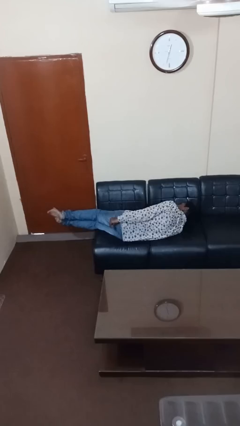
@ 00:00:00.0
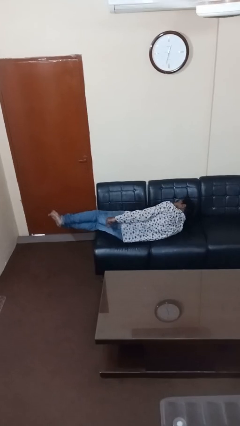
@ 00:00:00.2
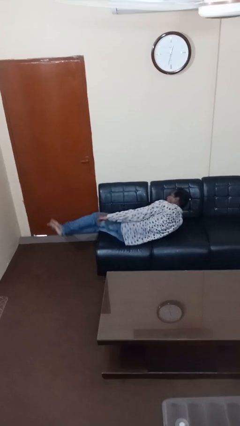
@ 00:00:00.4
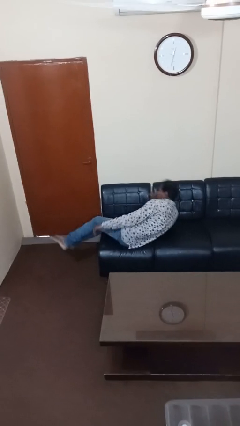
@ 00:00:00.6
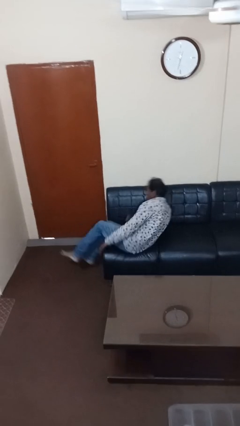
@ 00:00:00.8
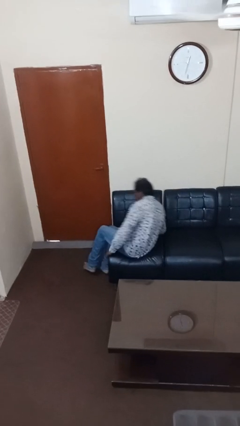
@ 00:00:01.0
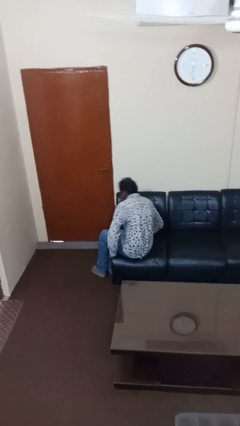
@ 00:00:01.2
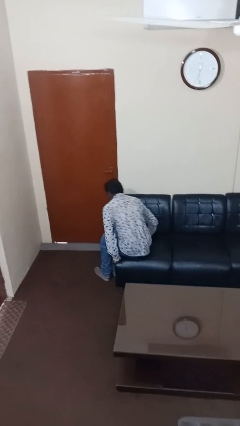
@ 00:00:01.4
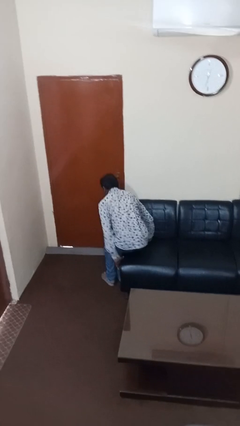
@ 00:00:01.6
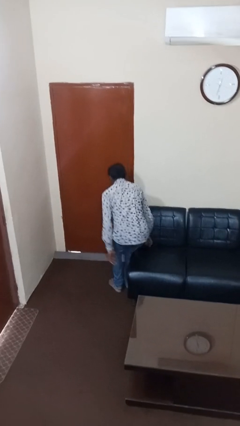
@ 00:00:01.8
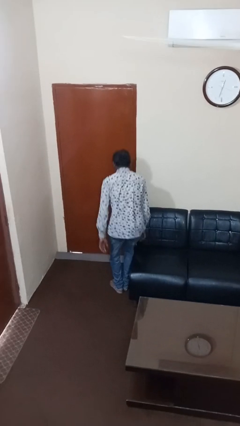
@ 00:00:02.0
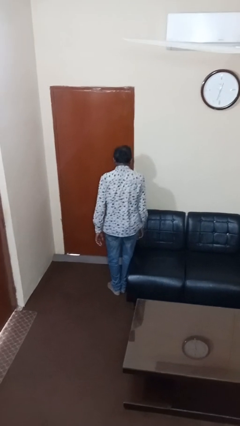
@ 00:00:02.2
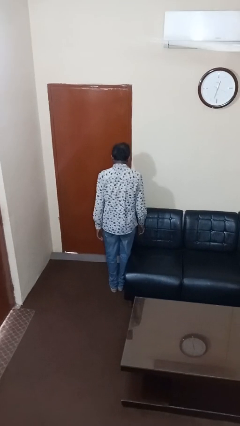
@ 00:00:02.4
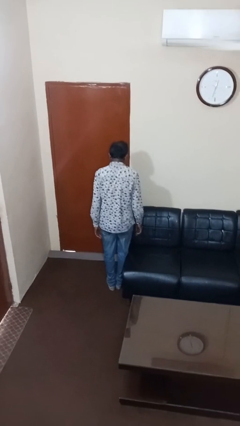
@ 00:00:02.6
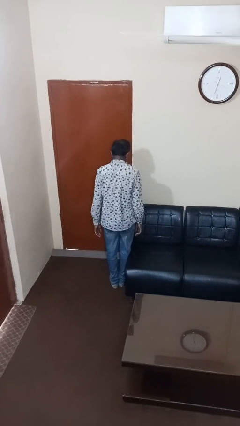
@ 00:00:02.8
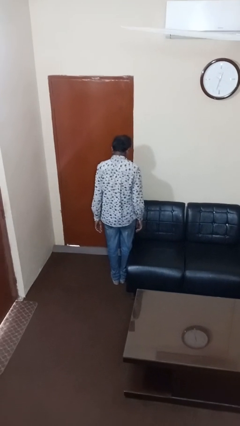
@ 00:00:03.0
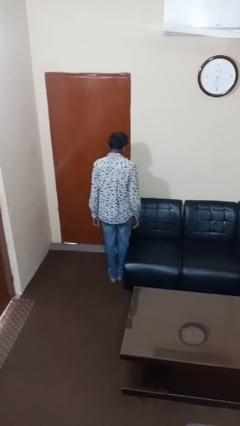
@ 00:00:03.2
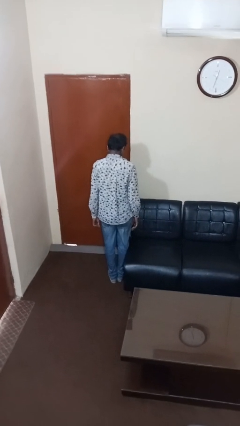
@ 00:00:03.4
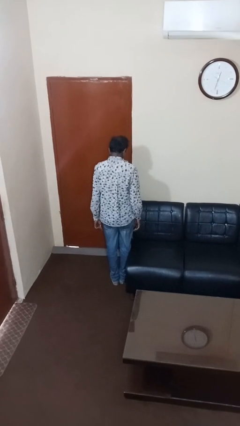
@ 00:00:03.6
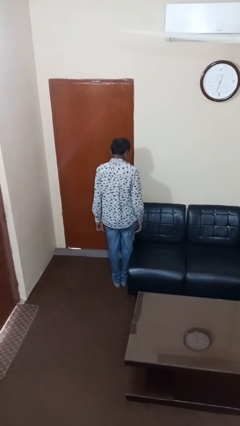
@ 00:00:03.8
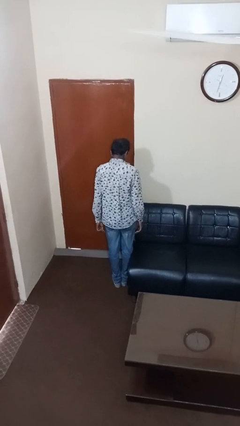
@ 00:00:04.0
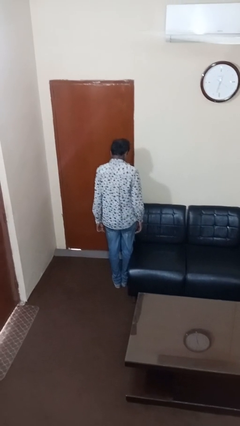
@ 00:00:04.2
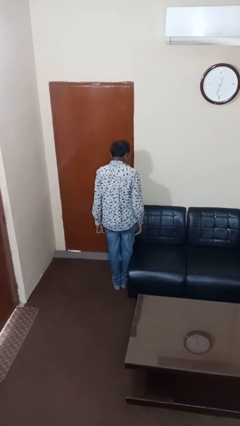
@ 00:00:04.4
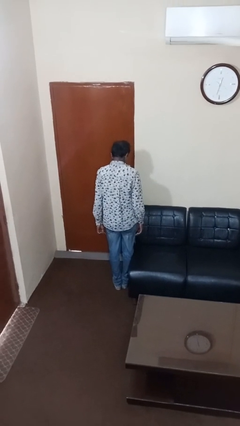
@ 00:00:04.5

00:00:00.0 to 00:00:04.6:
person stands up

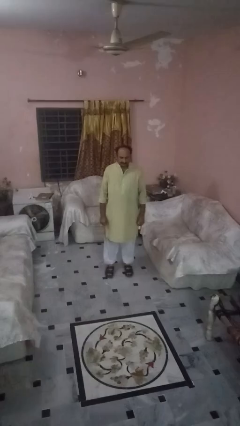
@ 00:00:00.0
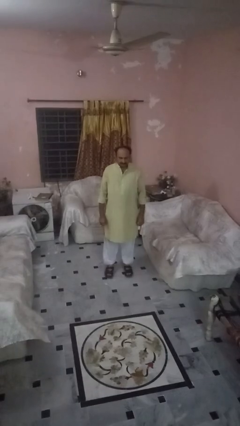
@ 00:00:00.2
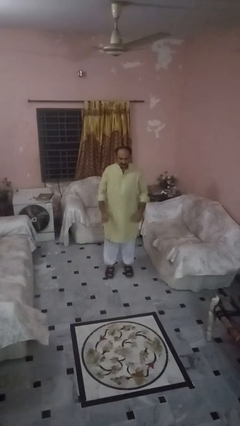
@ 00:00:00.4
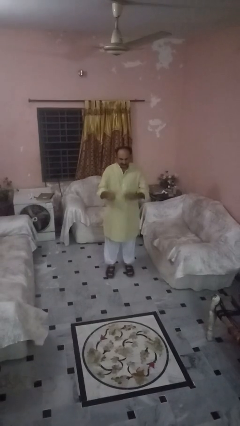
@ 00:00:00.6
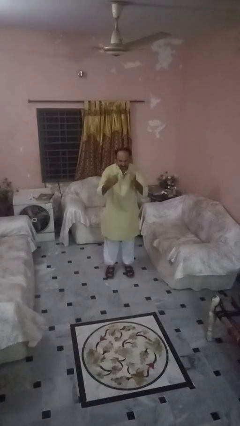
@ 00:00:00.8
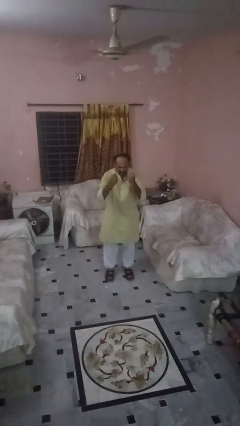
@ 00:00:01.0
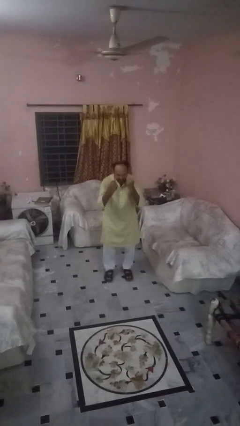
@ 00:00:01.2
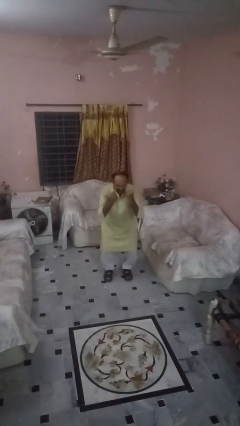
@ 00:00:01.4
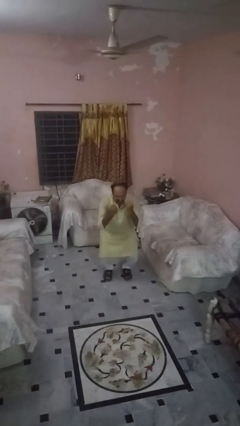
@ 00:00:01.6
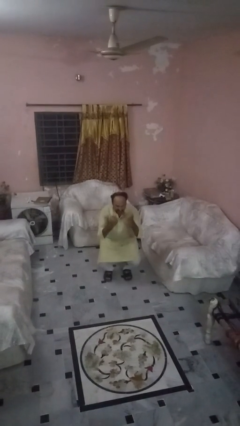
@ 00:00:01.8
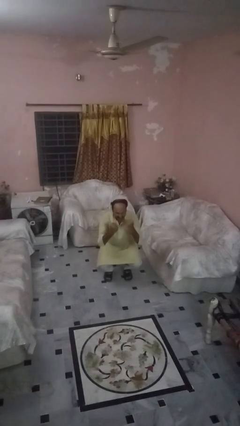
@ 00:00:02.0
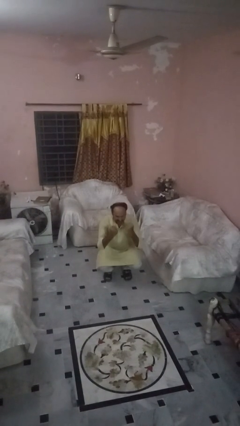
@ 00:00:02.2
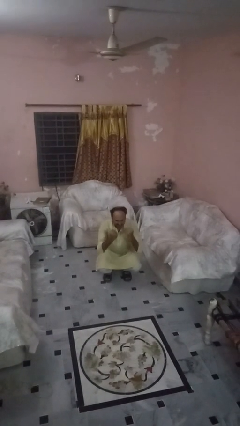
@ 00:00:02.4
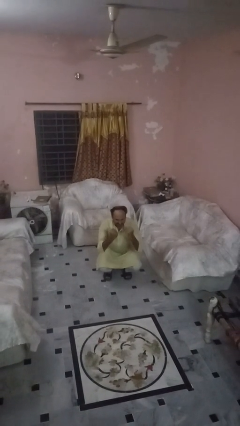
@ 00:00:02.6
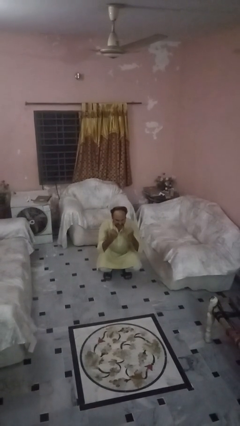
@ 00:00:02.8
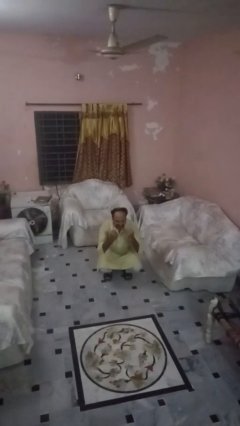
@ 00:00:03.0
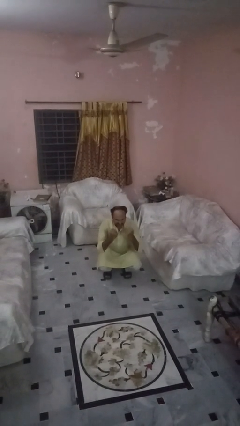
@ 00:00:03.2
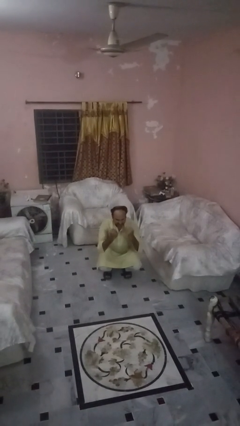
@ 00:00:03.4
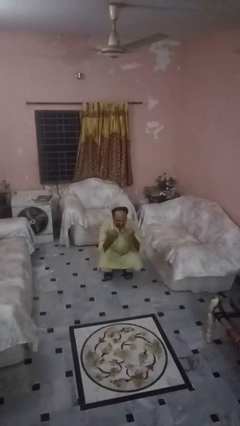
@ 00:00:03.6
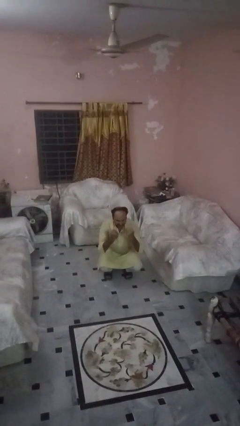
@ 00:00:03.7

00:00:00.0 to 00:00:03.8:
person squats

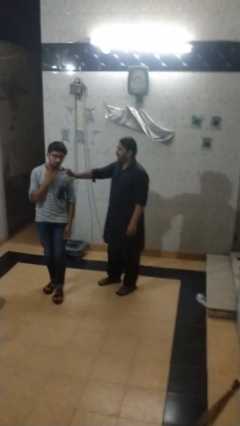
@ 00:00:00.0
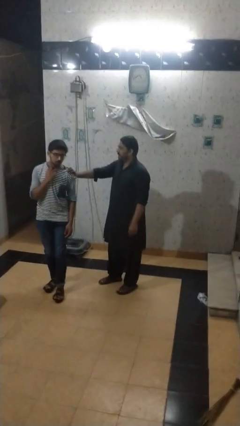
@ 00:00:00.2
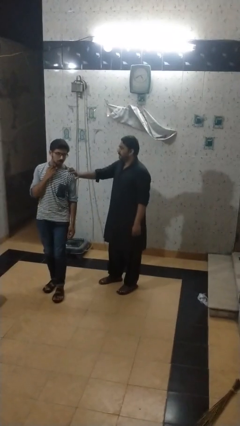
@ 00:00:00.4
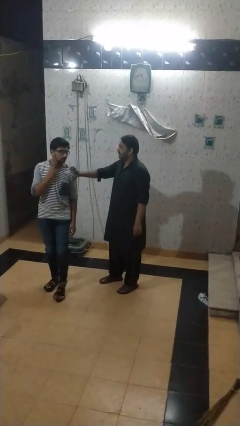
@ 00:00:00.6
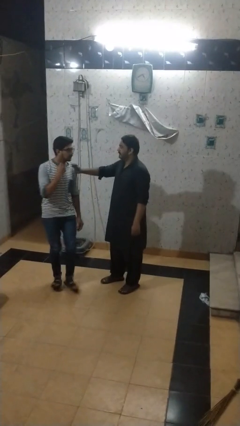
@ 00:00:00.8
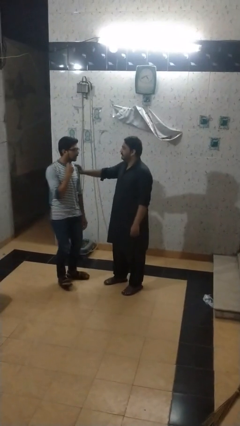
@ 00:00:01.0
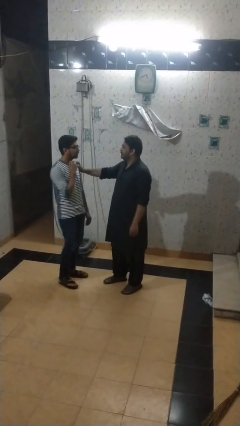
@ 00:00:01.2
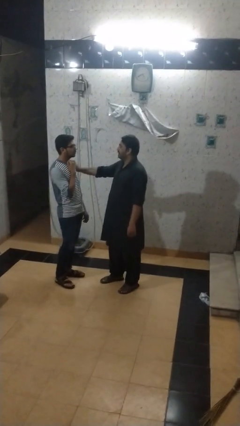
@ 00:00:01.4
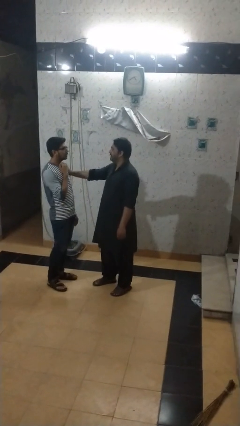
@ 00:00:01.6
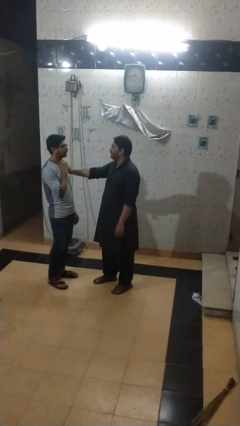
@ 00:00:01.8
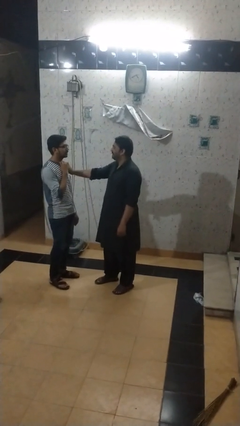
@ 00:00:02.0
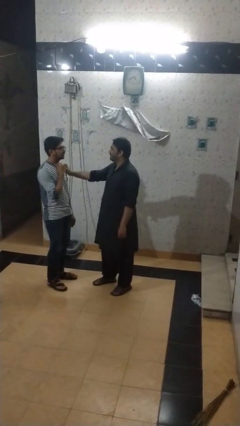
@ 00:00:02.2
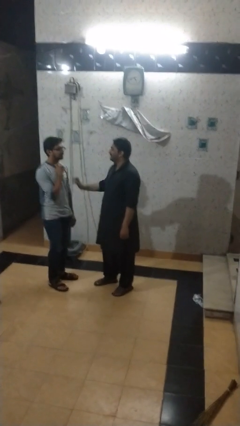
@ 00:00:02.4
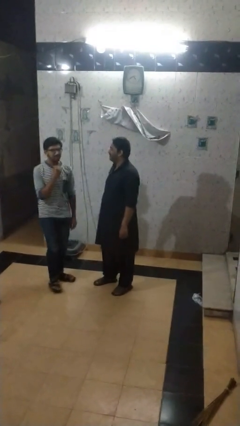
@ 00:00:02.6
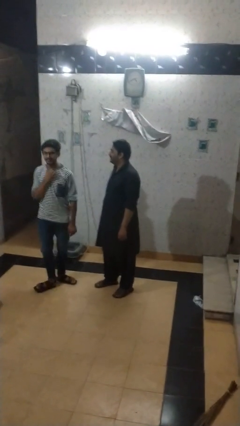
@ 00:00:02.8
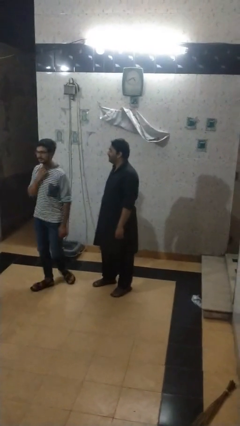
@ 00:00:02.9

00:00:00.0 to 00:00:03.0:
person spins person around

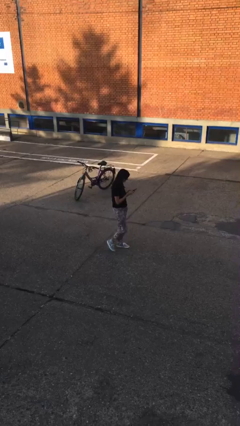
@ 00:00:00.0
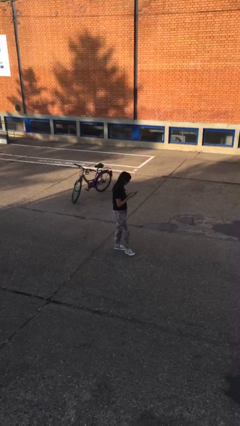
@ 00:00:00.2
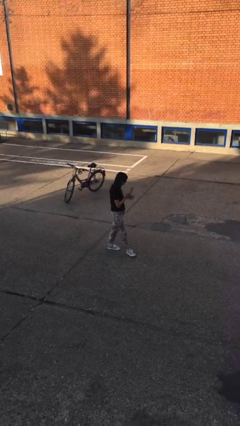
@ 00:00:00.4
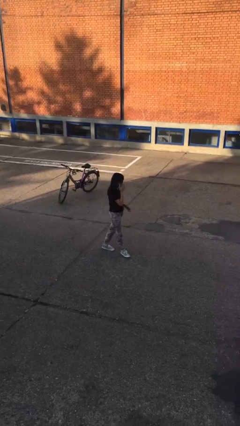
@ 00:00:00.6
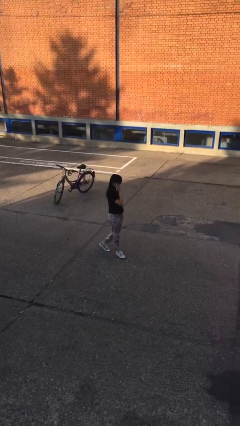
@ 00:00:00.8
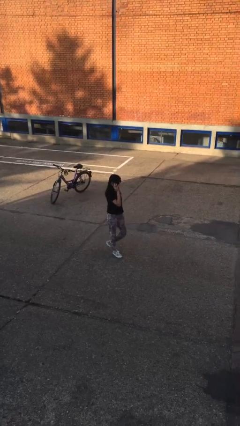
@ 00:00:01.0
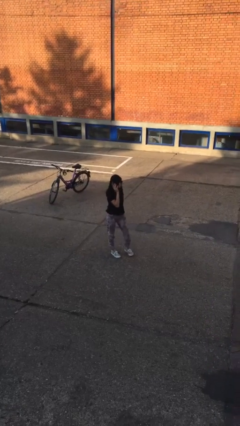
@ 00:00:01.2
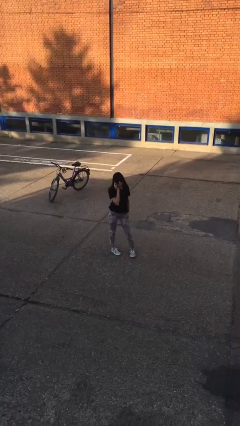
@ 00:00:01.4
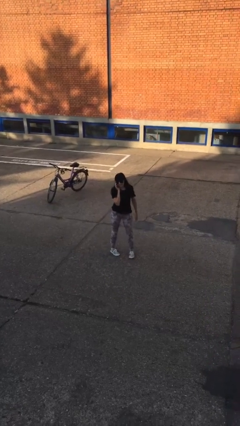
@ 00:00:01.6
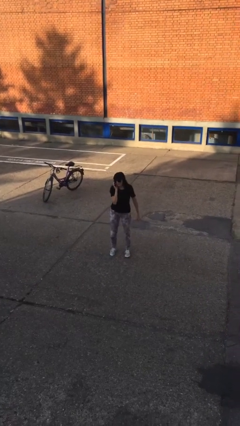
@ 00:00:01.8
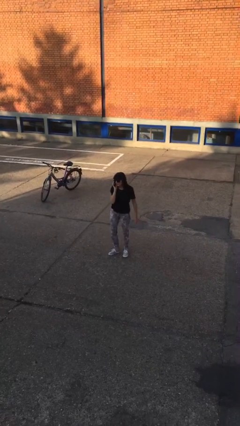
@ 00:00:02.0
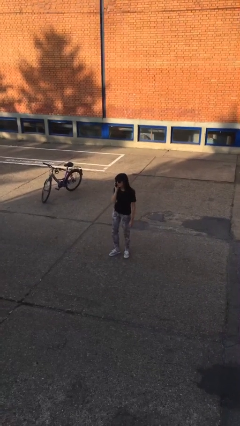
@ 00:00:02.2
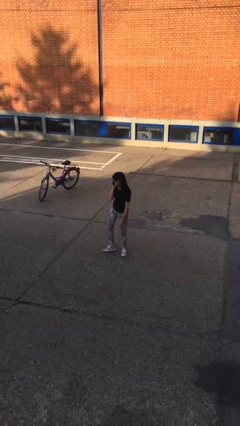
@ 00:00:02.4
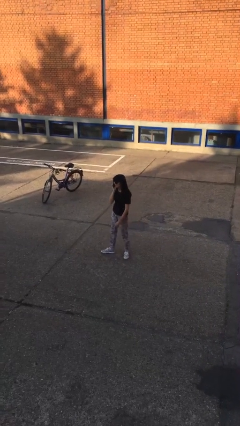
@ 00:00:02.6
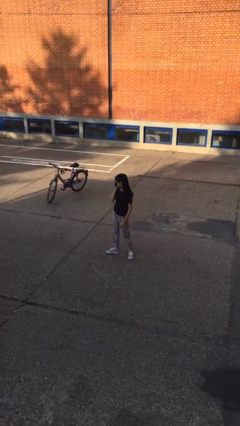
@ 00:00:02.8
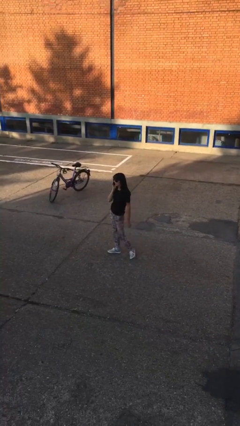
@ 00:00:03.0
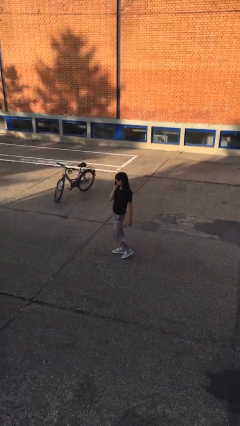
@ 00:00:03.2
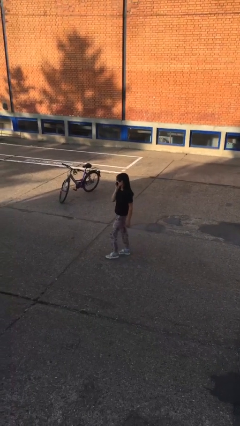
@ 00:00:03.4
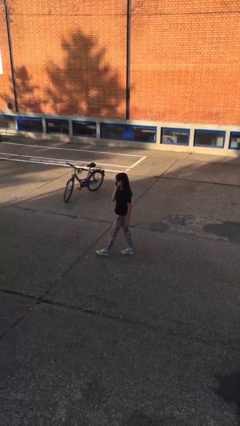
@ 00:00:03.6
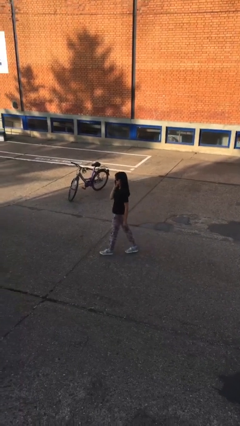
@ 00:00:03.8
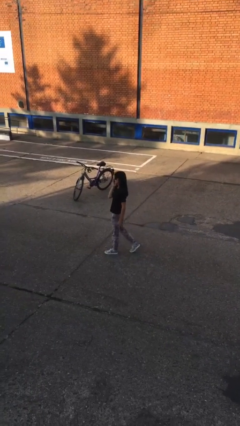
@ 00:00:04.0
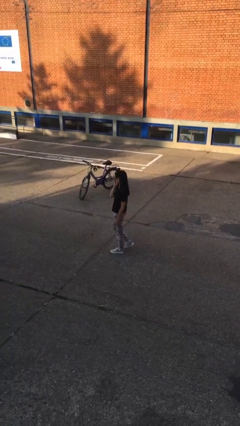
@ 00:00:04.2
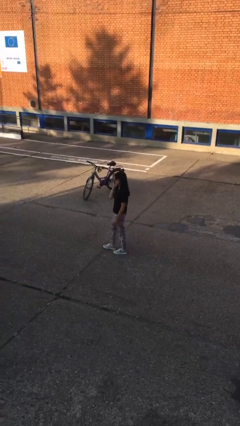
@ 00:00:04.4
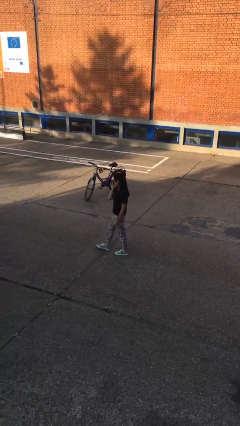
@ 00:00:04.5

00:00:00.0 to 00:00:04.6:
person talks on phone

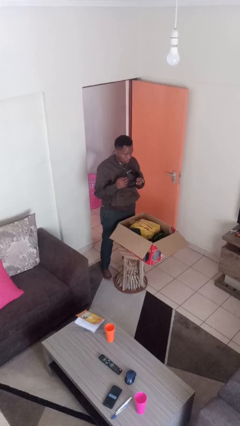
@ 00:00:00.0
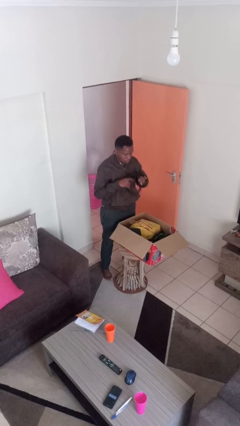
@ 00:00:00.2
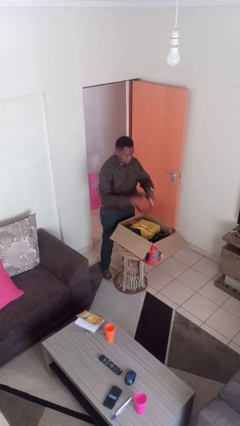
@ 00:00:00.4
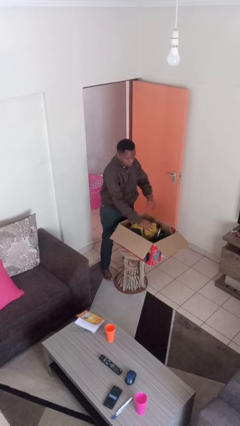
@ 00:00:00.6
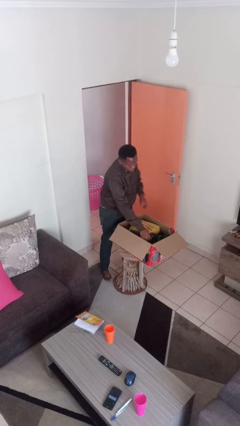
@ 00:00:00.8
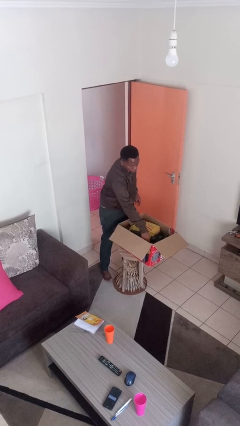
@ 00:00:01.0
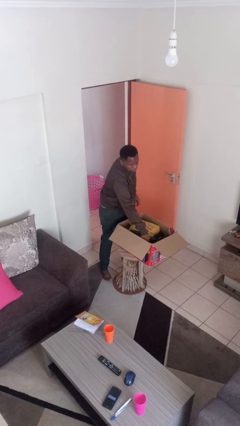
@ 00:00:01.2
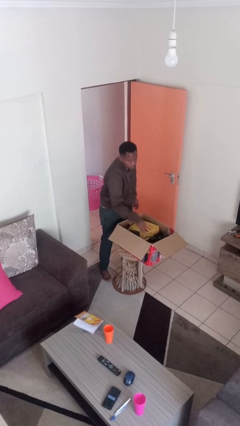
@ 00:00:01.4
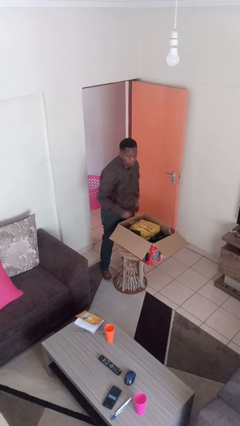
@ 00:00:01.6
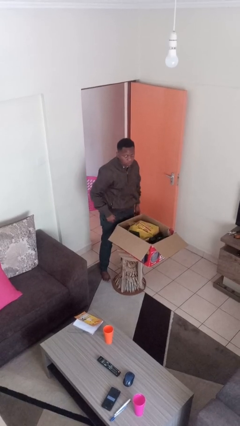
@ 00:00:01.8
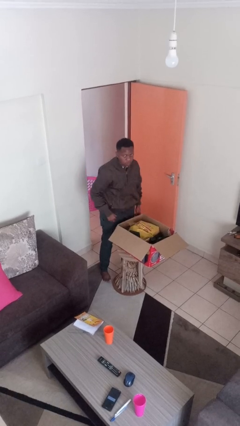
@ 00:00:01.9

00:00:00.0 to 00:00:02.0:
person puts object into box
